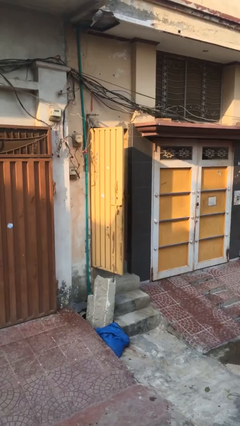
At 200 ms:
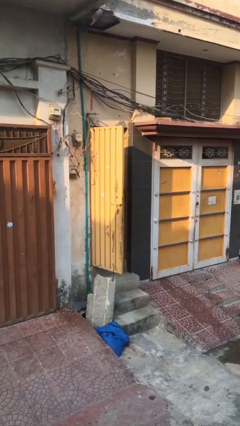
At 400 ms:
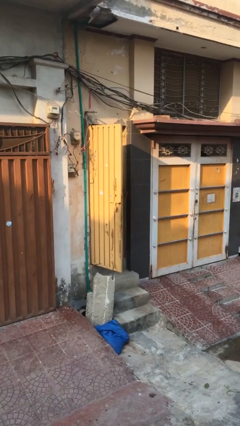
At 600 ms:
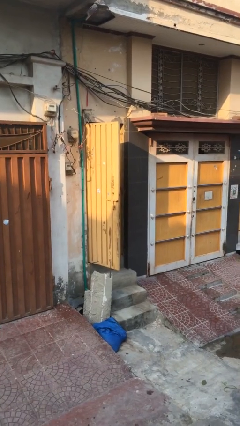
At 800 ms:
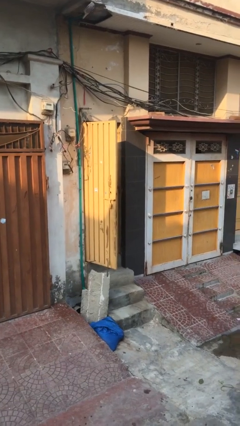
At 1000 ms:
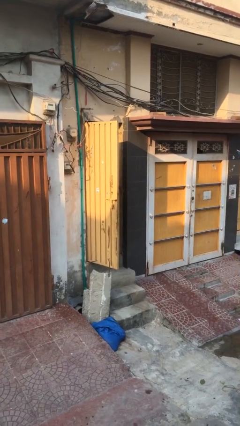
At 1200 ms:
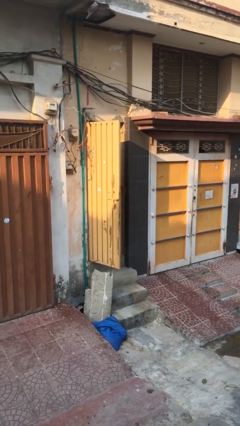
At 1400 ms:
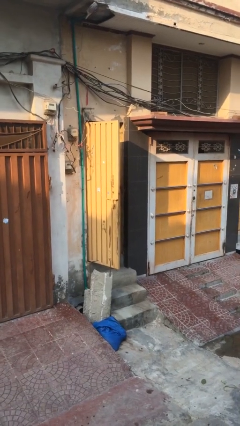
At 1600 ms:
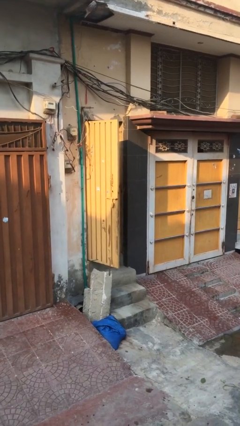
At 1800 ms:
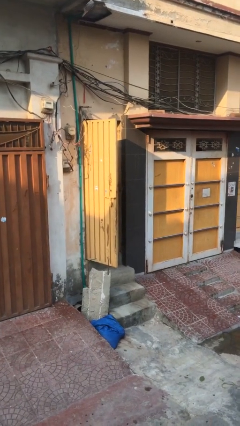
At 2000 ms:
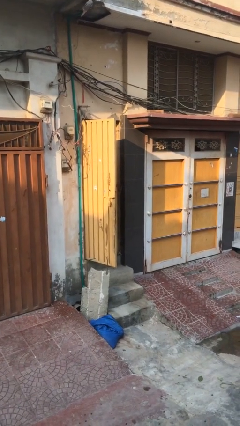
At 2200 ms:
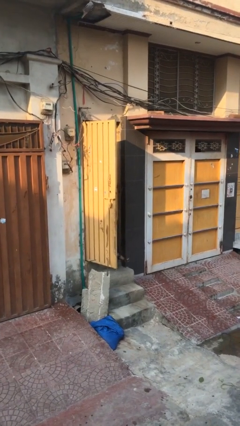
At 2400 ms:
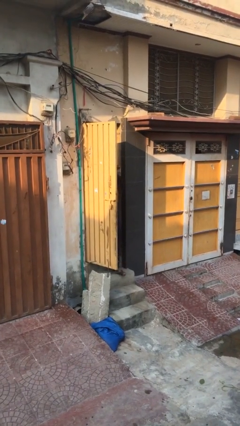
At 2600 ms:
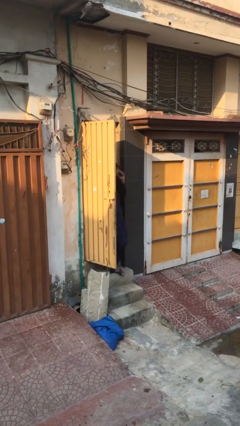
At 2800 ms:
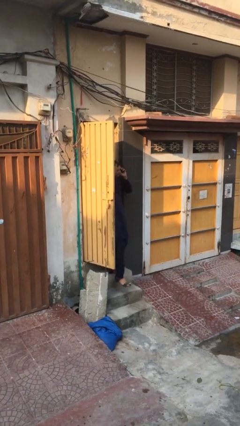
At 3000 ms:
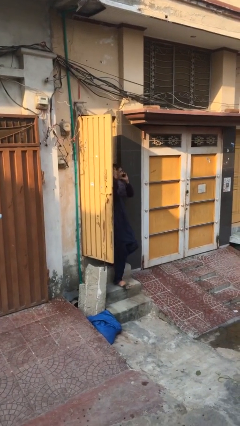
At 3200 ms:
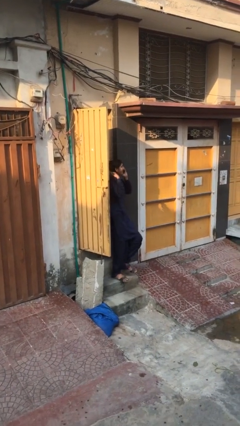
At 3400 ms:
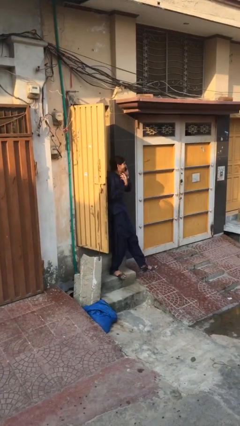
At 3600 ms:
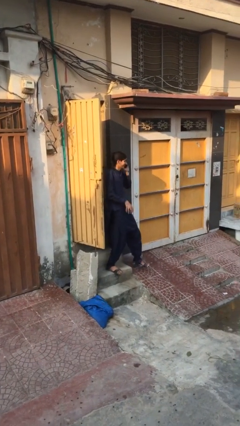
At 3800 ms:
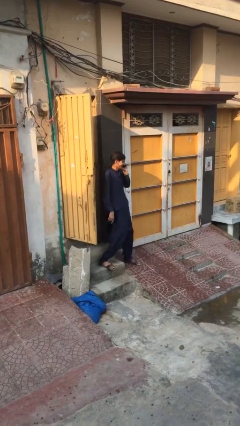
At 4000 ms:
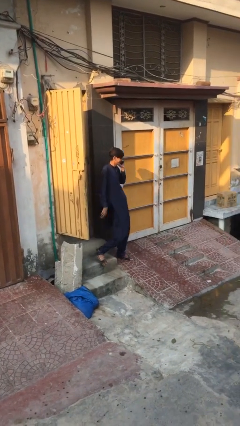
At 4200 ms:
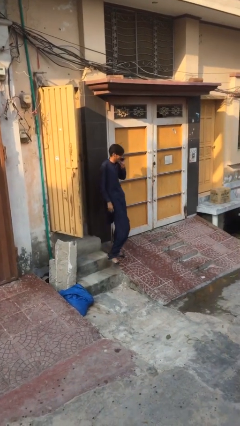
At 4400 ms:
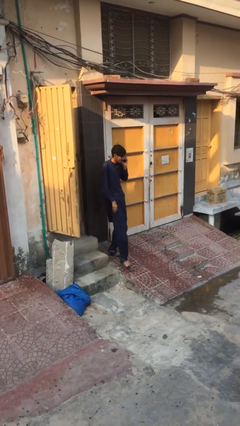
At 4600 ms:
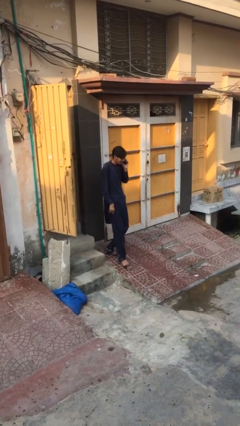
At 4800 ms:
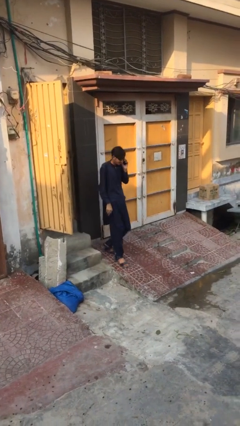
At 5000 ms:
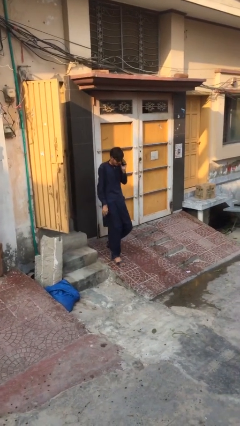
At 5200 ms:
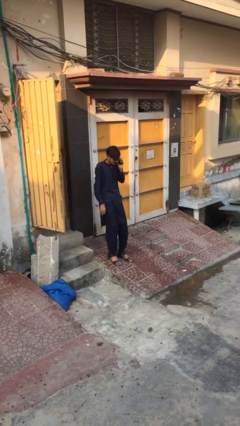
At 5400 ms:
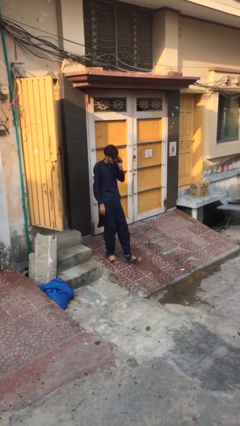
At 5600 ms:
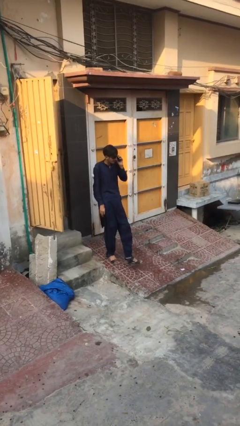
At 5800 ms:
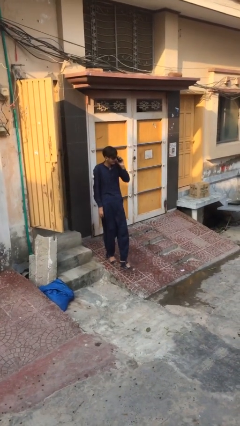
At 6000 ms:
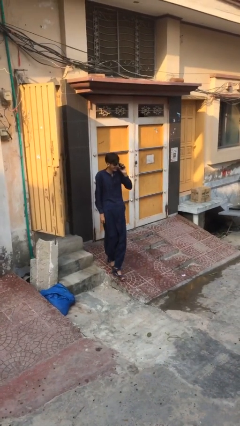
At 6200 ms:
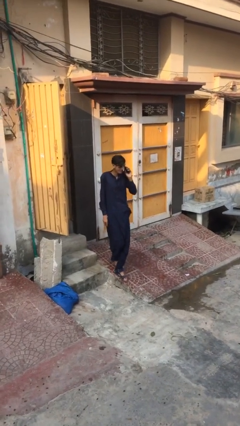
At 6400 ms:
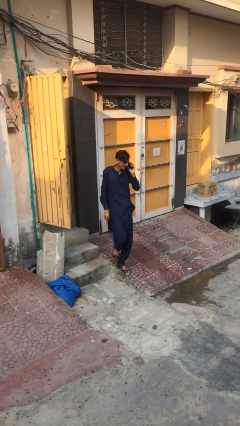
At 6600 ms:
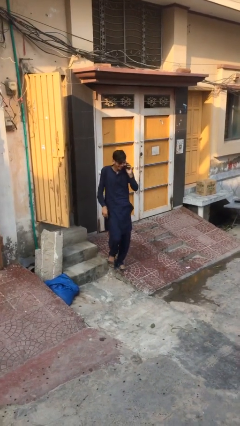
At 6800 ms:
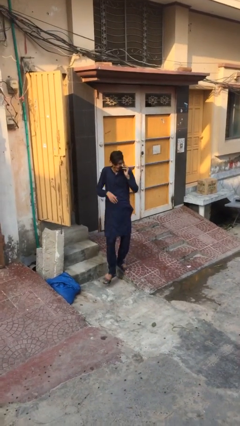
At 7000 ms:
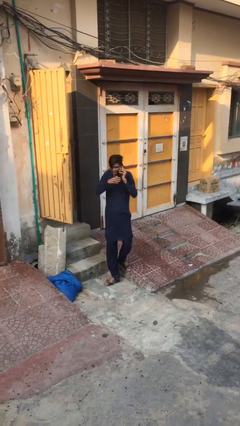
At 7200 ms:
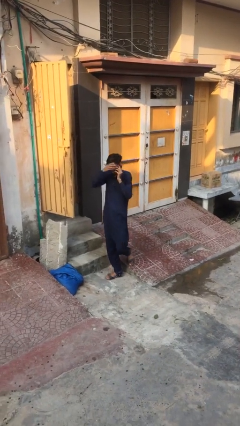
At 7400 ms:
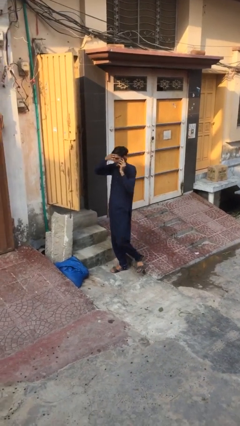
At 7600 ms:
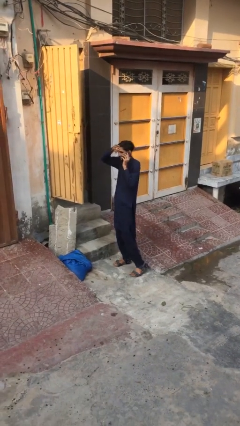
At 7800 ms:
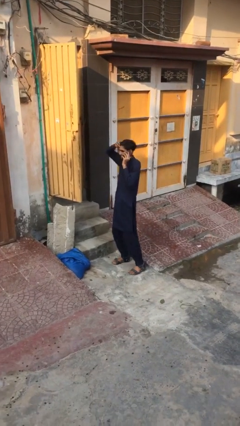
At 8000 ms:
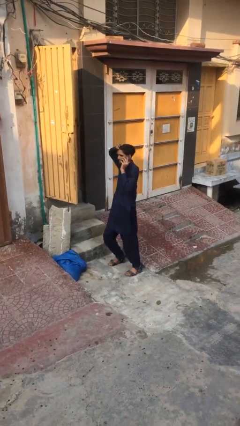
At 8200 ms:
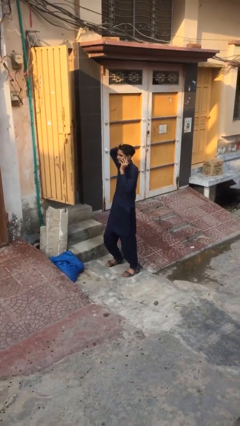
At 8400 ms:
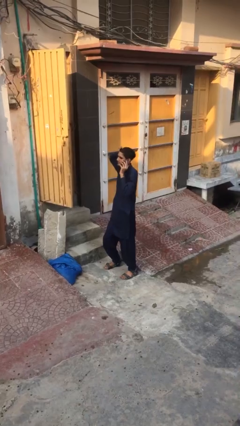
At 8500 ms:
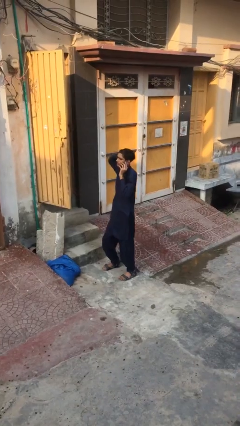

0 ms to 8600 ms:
person enters scene through structure

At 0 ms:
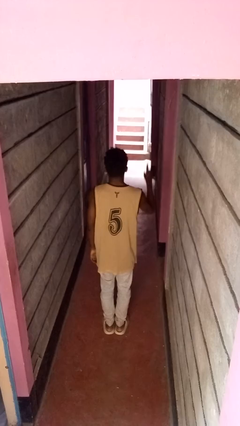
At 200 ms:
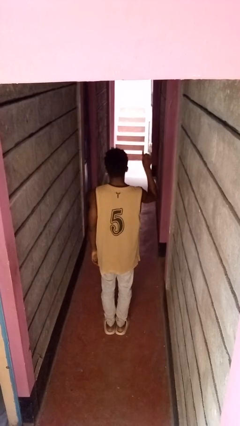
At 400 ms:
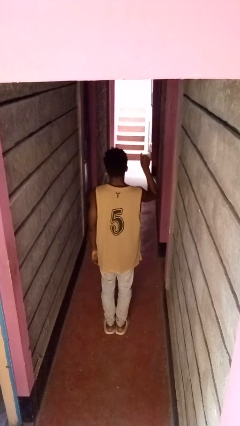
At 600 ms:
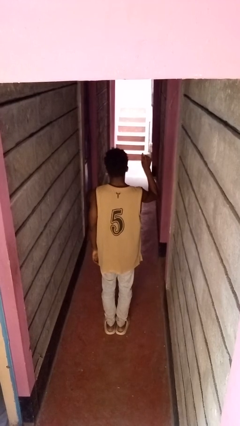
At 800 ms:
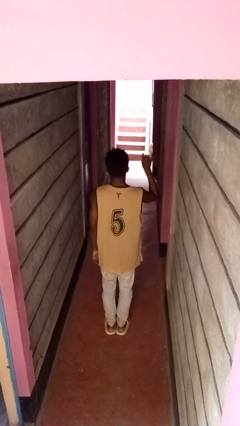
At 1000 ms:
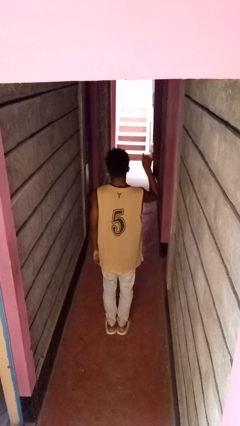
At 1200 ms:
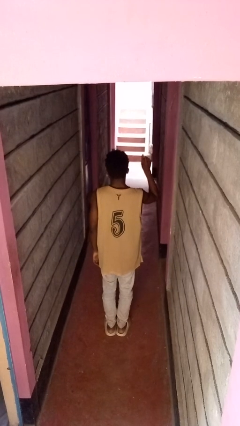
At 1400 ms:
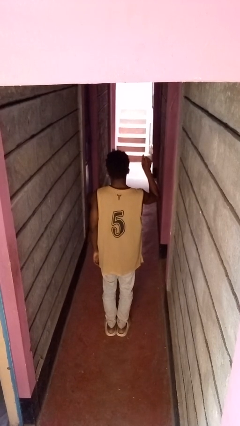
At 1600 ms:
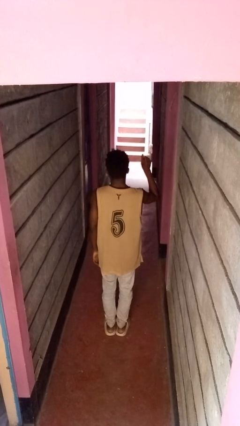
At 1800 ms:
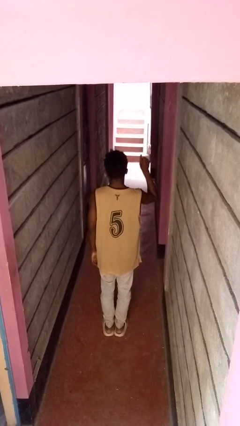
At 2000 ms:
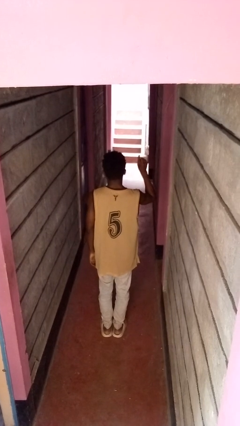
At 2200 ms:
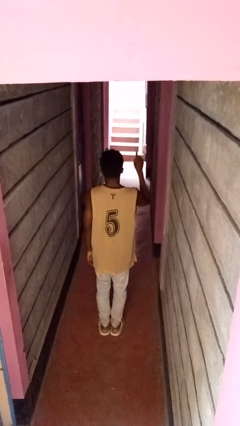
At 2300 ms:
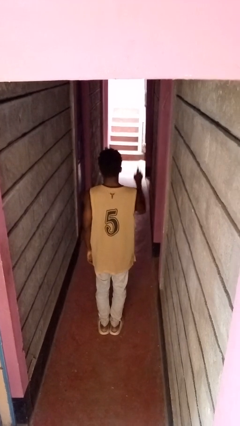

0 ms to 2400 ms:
person gestures number one

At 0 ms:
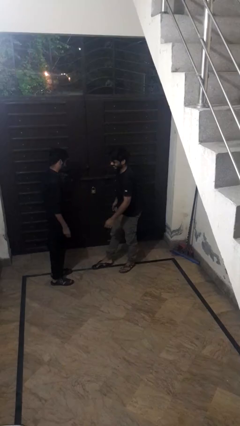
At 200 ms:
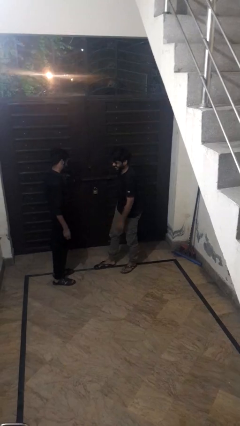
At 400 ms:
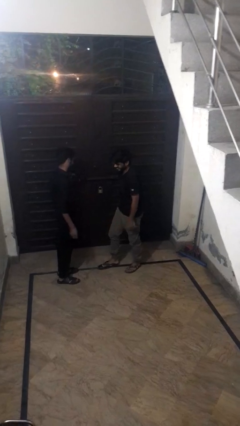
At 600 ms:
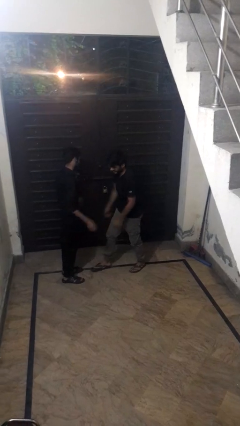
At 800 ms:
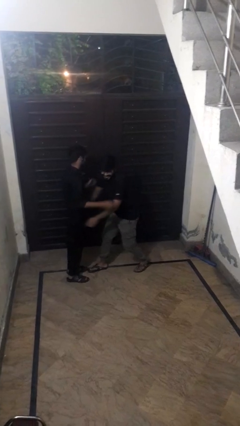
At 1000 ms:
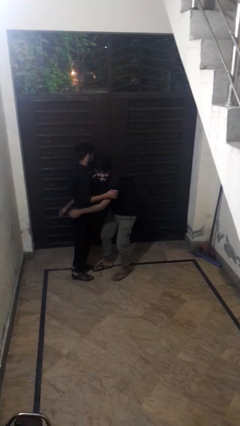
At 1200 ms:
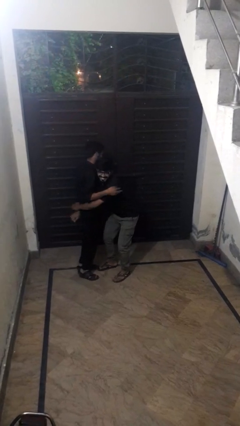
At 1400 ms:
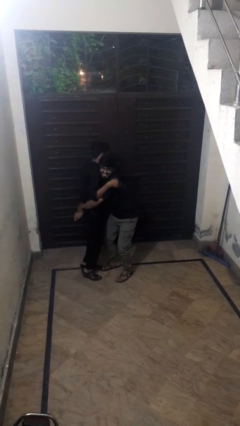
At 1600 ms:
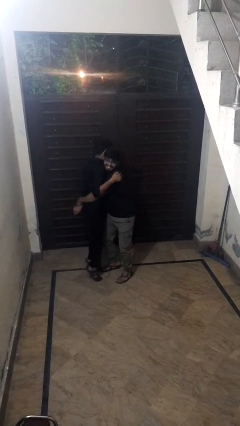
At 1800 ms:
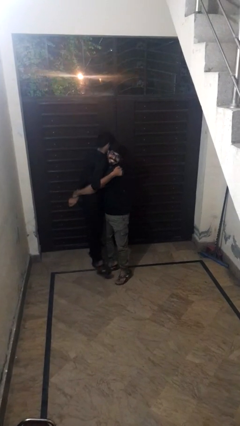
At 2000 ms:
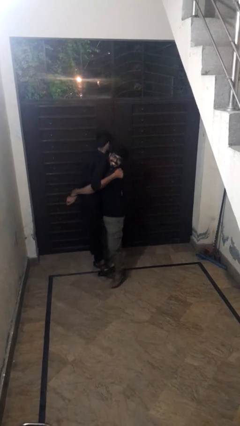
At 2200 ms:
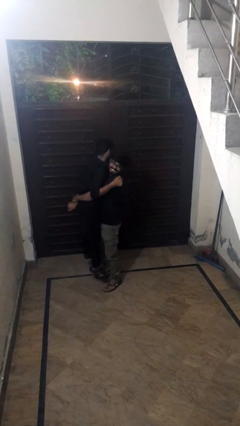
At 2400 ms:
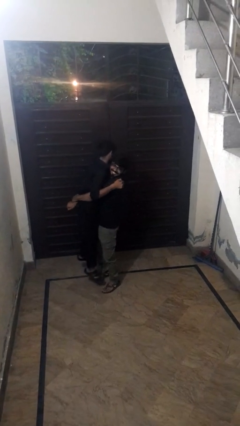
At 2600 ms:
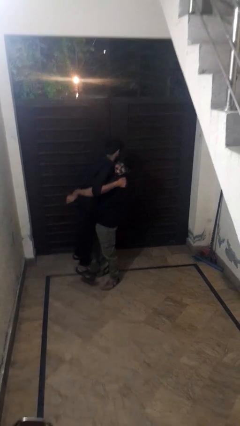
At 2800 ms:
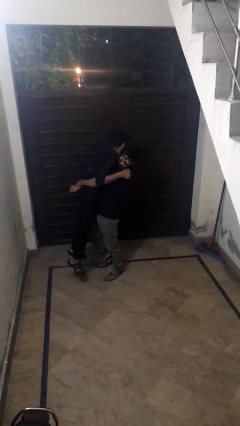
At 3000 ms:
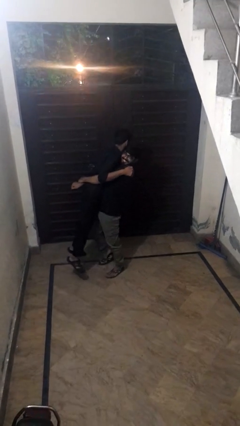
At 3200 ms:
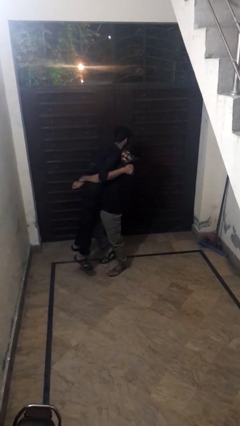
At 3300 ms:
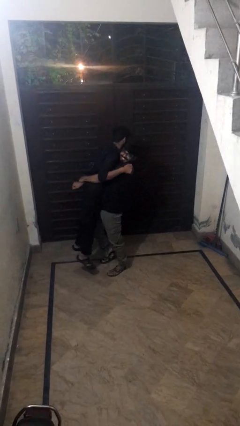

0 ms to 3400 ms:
person picks up person

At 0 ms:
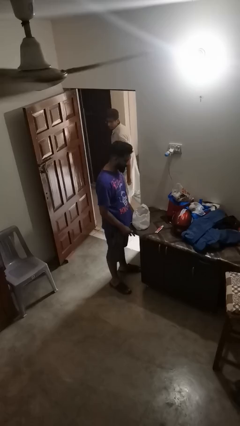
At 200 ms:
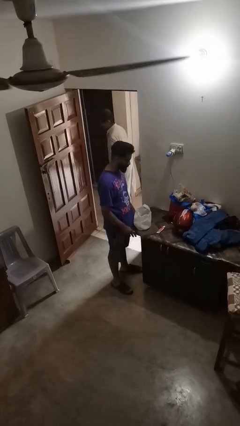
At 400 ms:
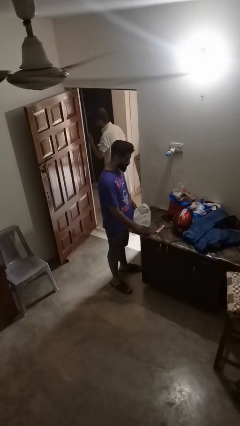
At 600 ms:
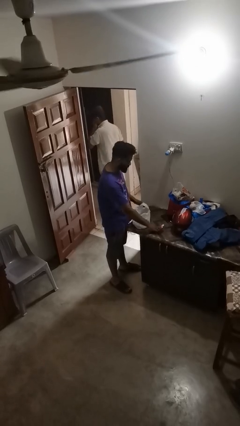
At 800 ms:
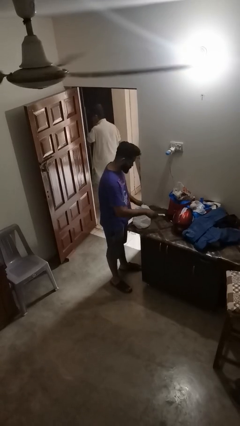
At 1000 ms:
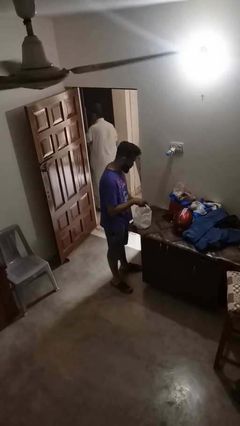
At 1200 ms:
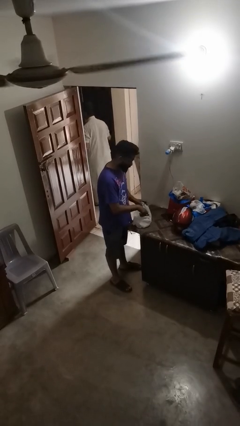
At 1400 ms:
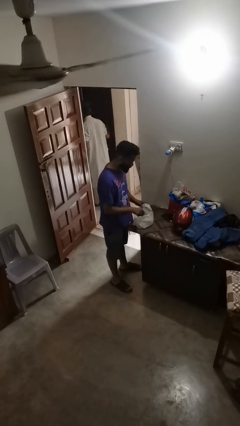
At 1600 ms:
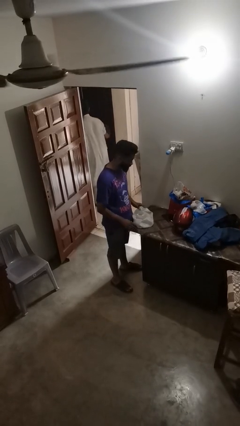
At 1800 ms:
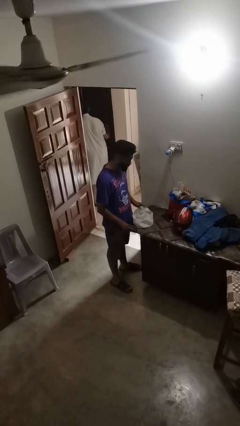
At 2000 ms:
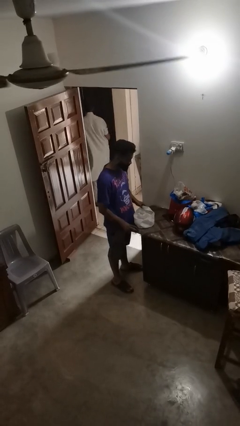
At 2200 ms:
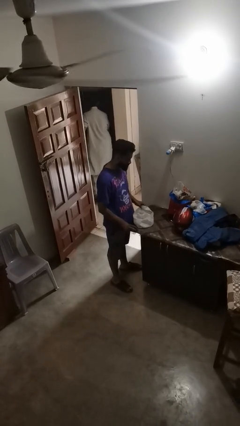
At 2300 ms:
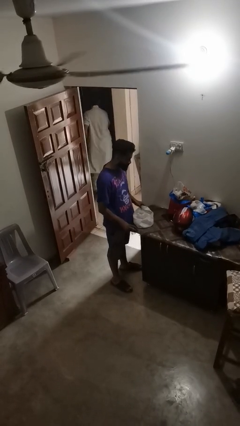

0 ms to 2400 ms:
person puts object into bag

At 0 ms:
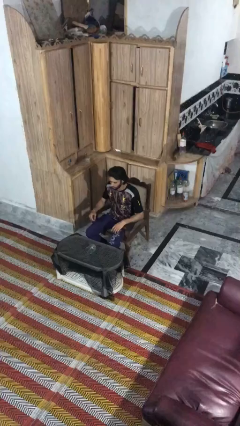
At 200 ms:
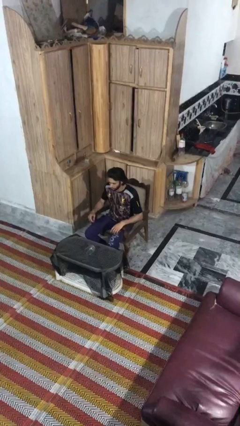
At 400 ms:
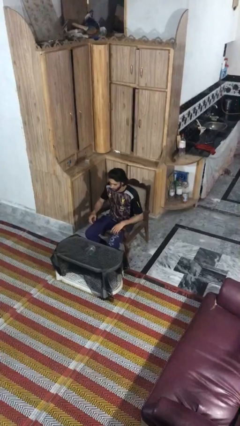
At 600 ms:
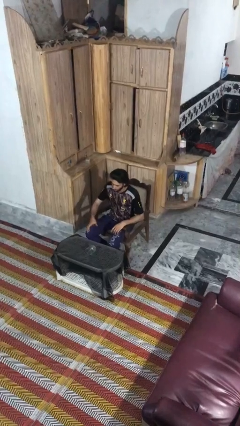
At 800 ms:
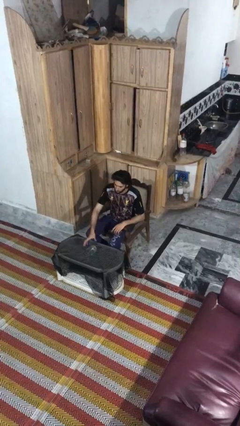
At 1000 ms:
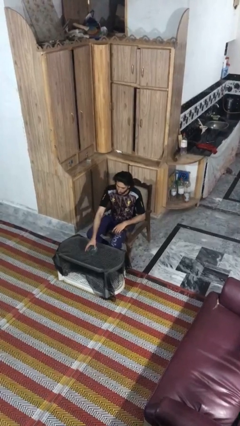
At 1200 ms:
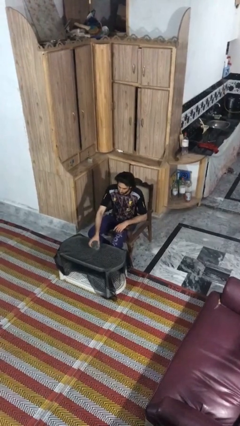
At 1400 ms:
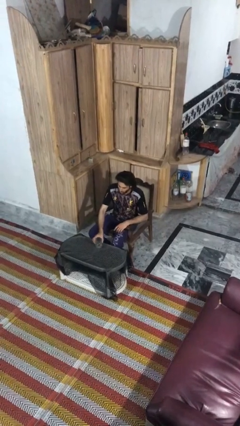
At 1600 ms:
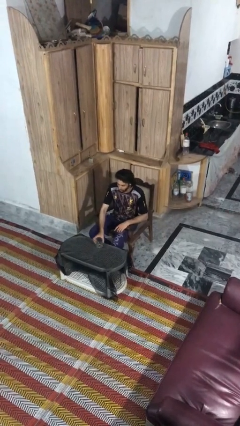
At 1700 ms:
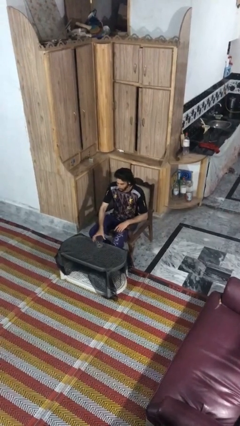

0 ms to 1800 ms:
person sets upright glass
